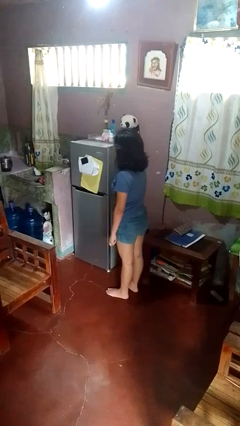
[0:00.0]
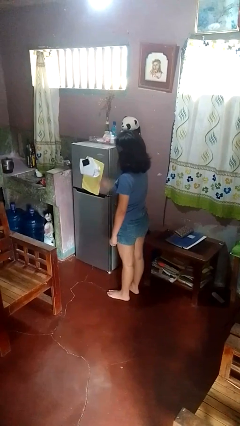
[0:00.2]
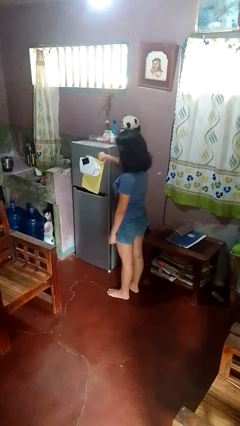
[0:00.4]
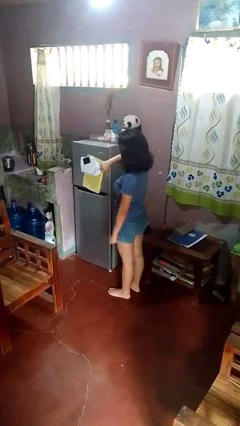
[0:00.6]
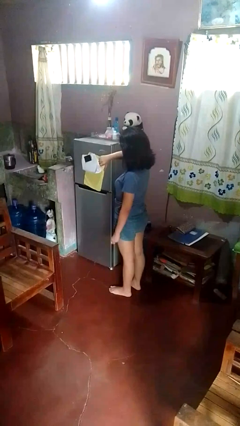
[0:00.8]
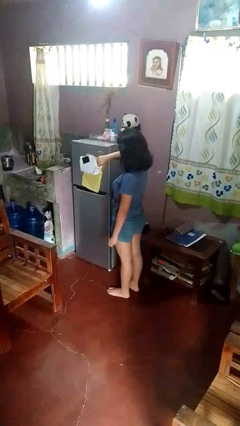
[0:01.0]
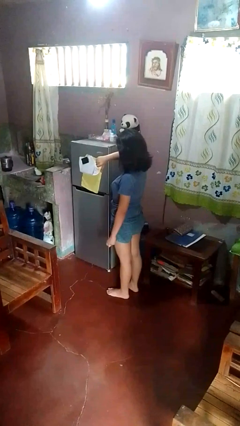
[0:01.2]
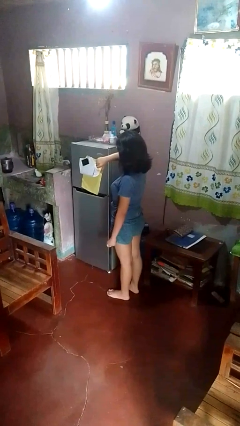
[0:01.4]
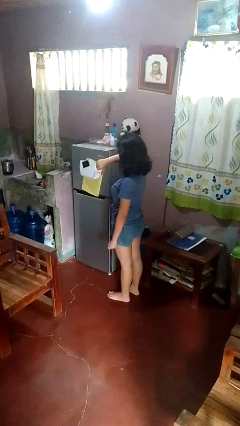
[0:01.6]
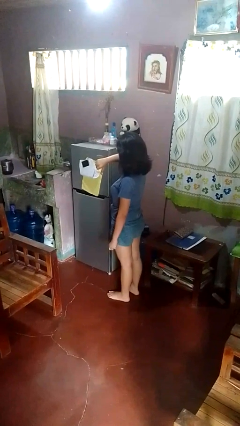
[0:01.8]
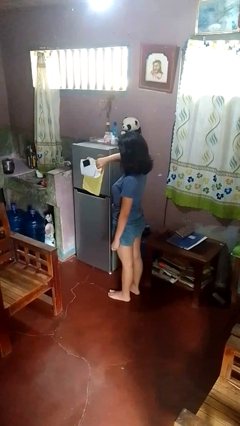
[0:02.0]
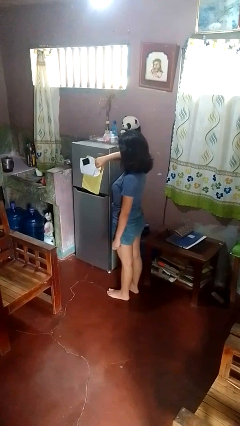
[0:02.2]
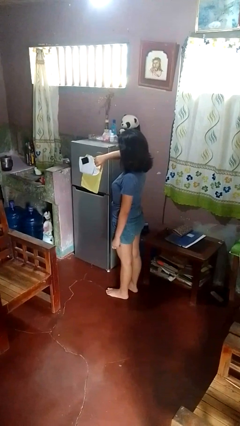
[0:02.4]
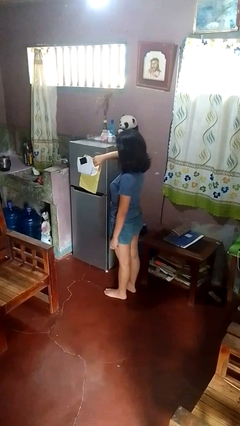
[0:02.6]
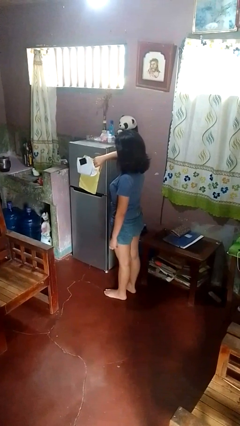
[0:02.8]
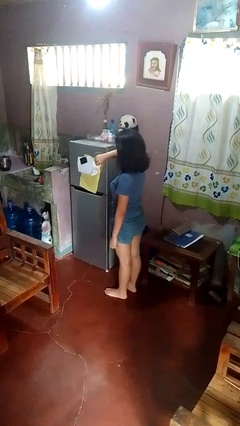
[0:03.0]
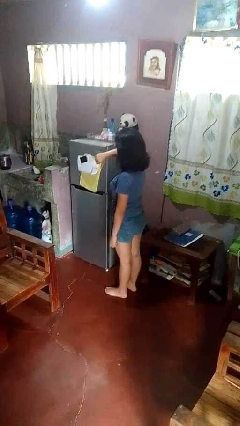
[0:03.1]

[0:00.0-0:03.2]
person gestures thumbs down

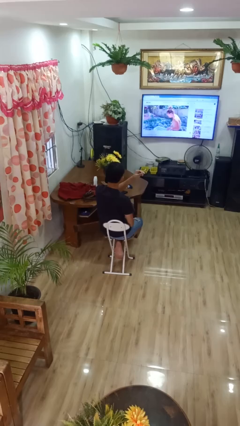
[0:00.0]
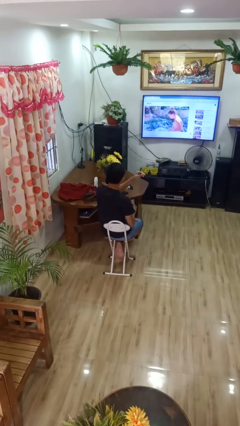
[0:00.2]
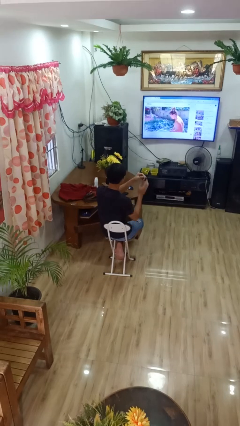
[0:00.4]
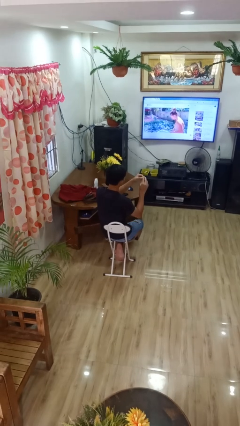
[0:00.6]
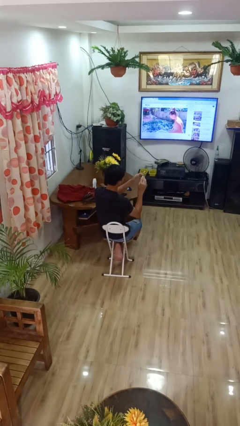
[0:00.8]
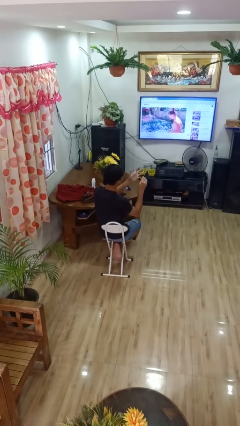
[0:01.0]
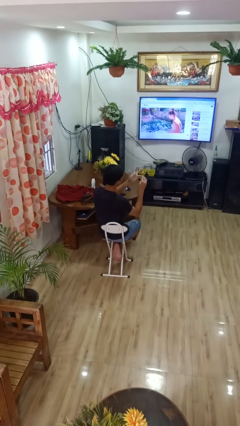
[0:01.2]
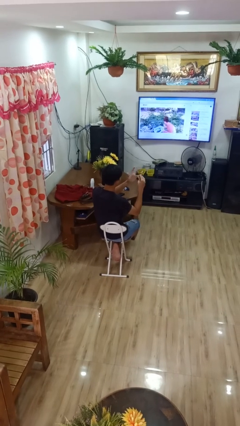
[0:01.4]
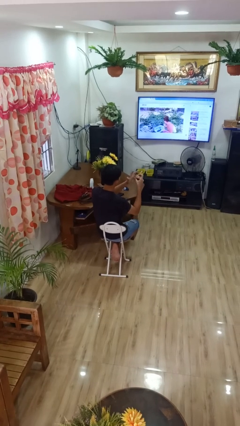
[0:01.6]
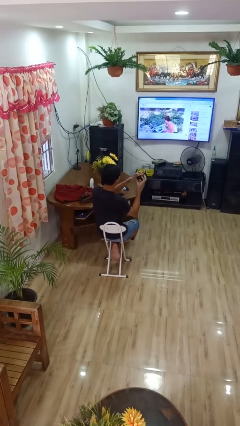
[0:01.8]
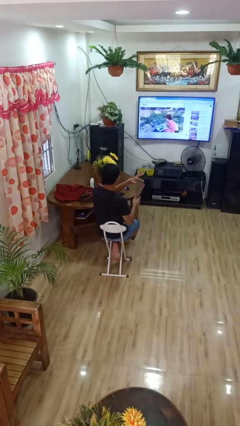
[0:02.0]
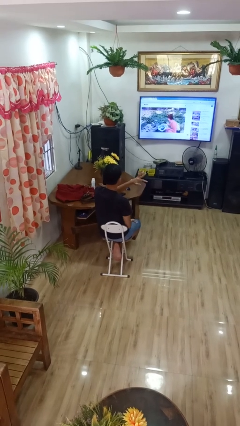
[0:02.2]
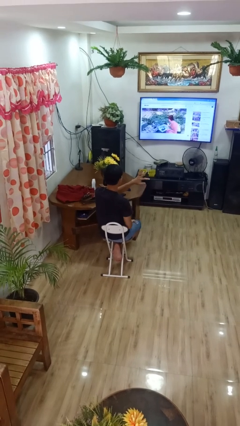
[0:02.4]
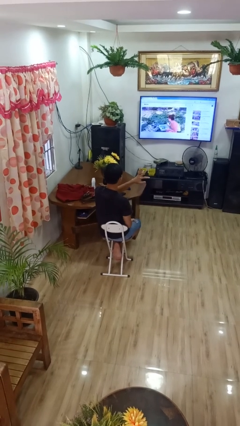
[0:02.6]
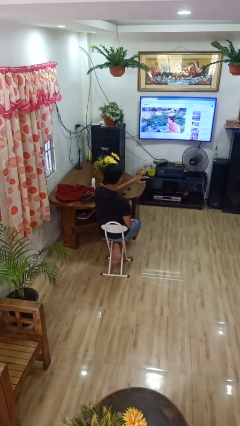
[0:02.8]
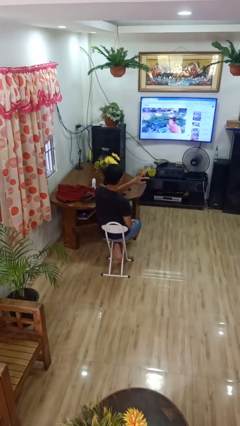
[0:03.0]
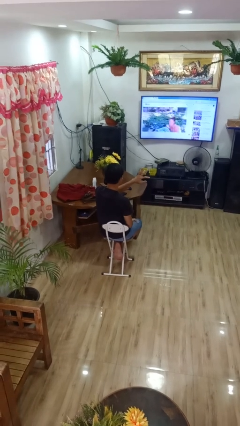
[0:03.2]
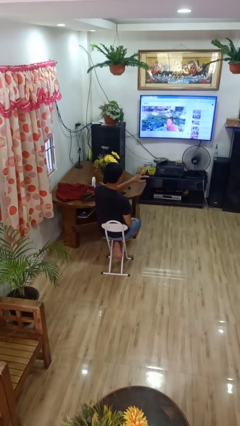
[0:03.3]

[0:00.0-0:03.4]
person puts on ring

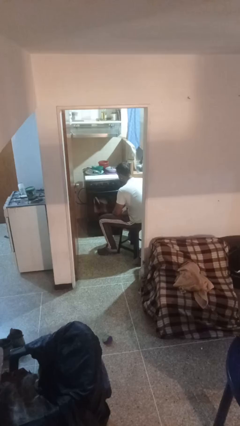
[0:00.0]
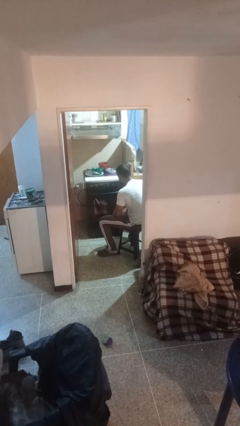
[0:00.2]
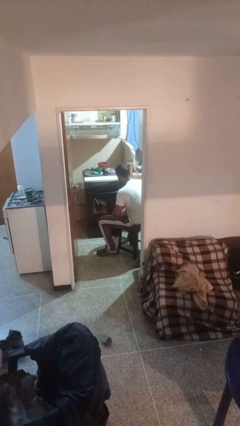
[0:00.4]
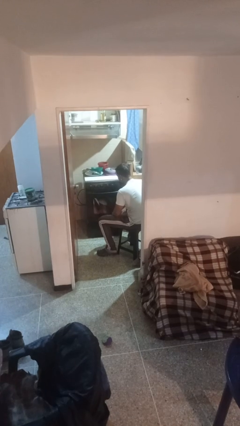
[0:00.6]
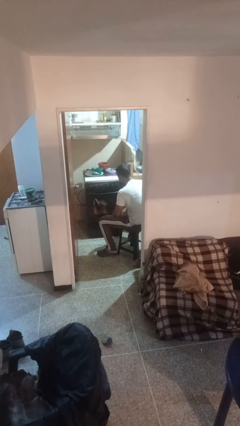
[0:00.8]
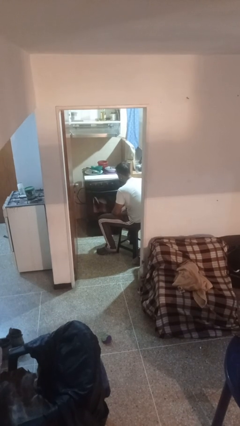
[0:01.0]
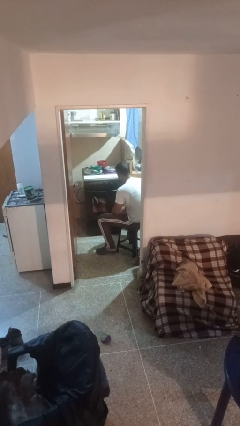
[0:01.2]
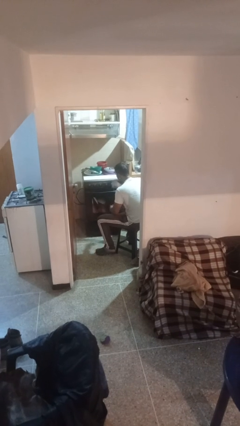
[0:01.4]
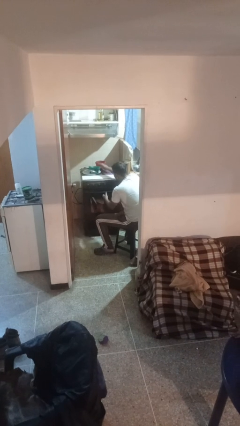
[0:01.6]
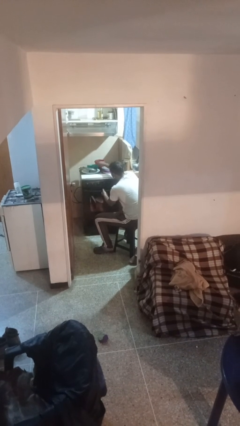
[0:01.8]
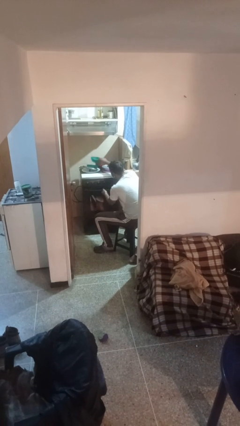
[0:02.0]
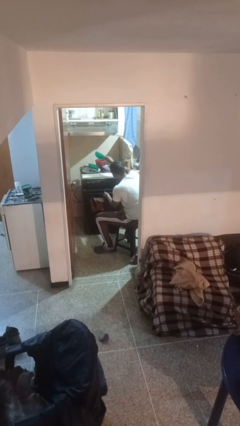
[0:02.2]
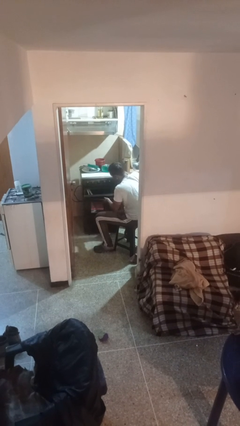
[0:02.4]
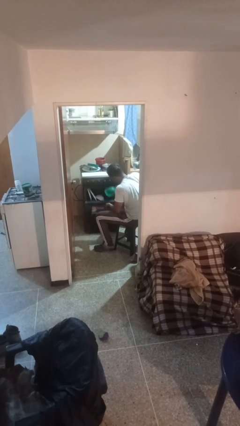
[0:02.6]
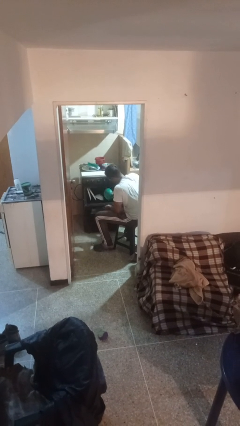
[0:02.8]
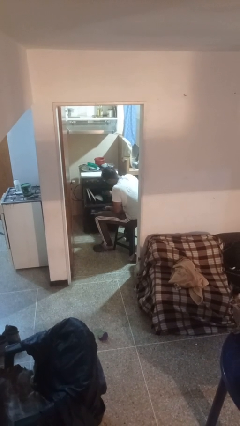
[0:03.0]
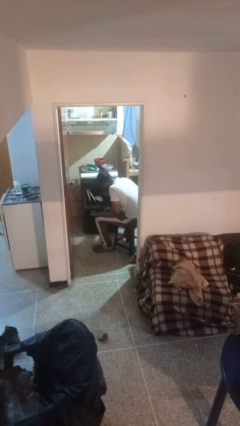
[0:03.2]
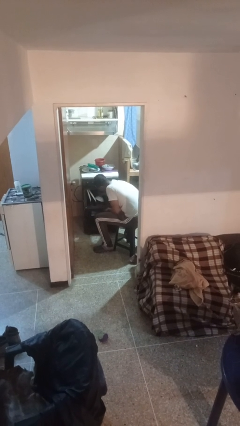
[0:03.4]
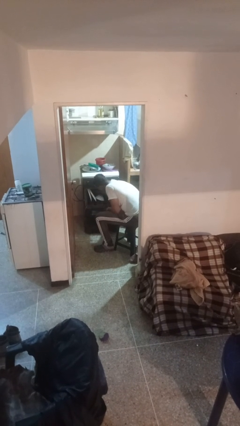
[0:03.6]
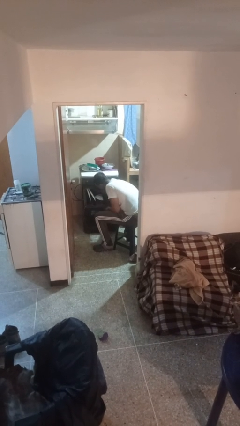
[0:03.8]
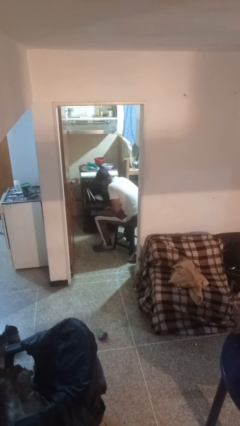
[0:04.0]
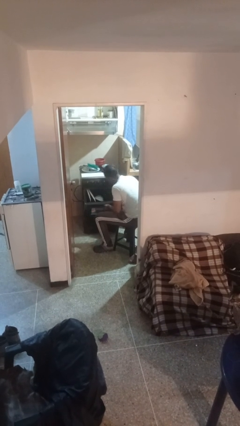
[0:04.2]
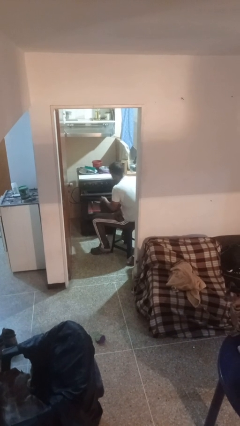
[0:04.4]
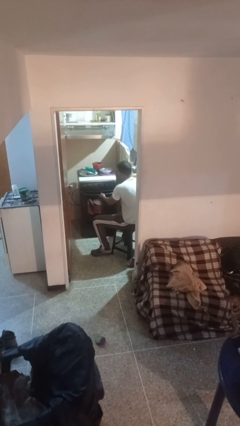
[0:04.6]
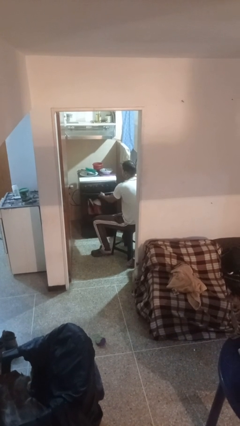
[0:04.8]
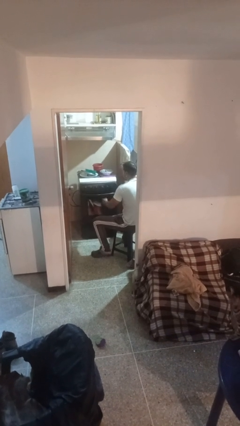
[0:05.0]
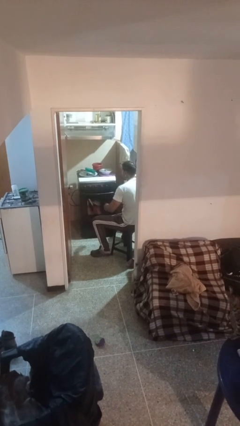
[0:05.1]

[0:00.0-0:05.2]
person loads dishwasher

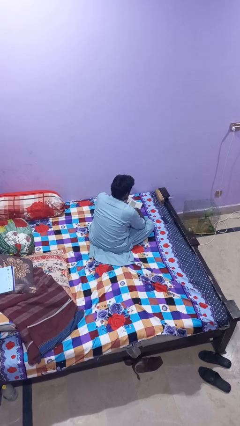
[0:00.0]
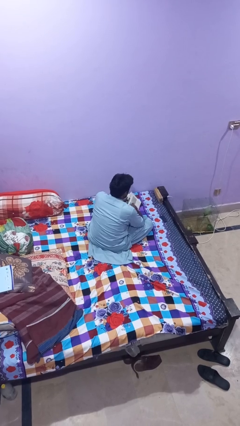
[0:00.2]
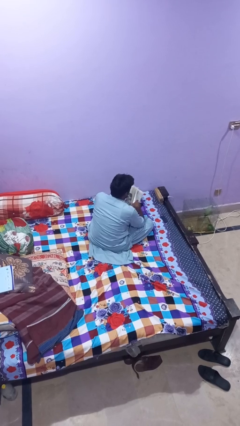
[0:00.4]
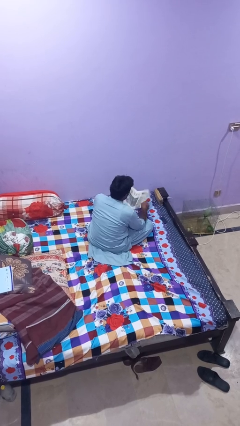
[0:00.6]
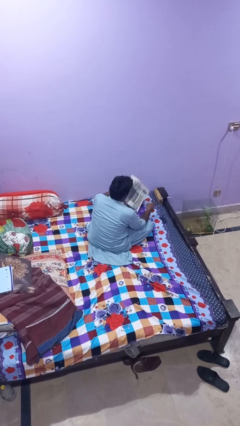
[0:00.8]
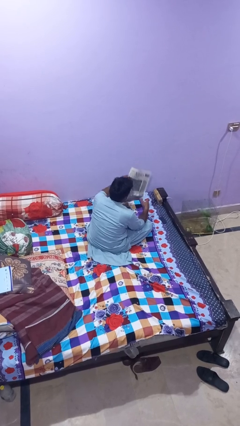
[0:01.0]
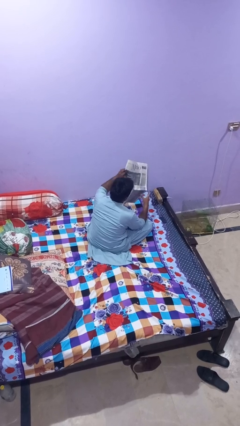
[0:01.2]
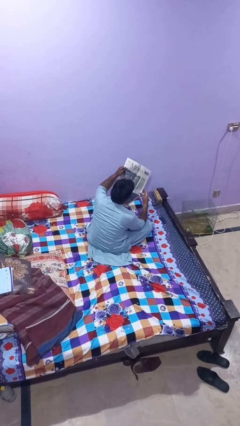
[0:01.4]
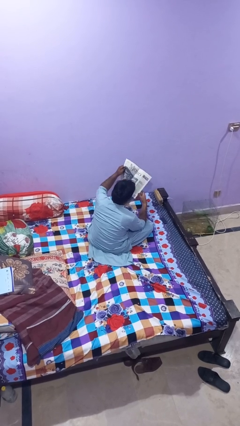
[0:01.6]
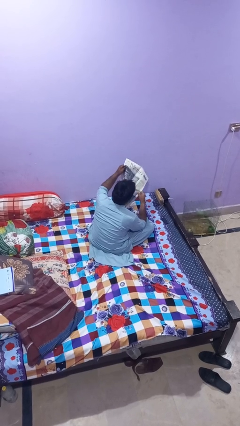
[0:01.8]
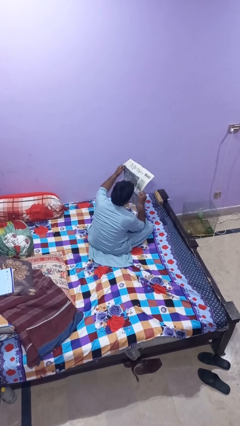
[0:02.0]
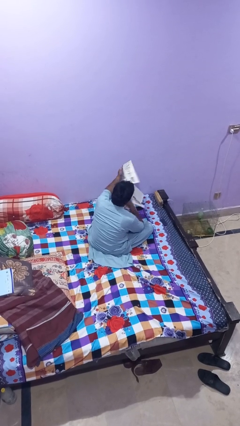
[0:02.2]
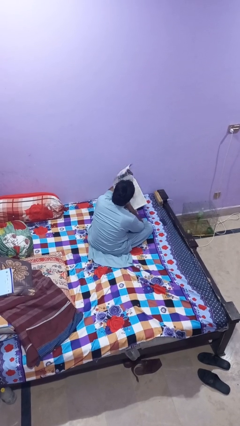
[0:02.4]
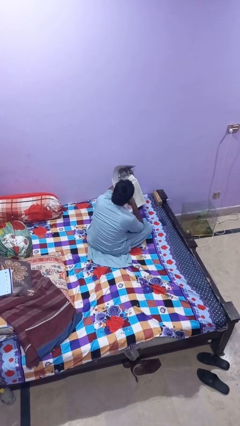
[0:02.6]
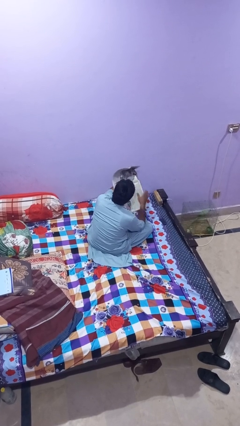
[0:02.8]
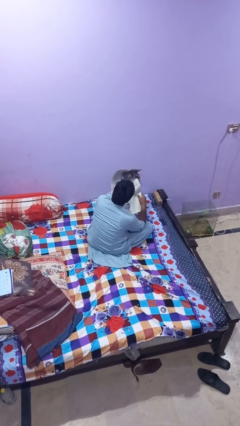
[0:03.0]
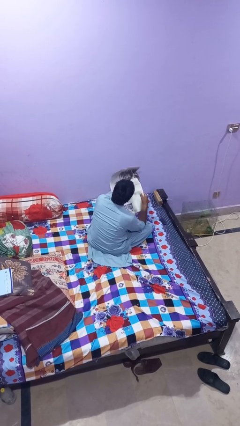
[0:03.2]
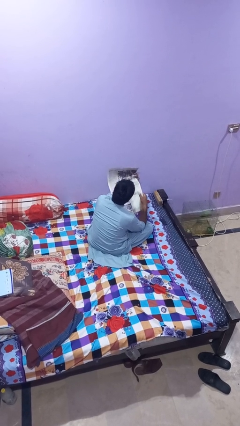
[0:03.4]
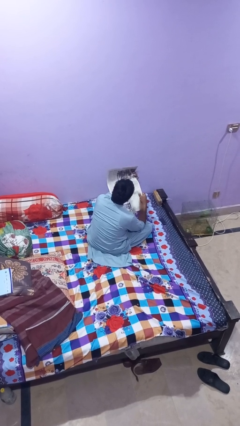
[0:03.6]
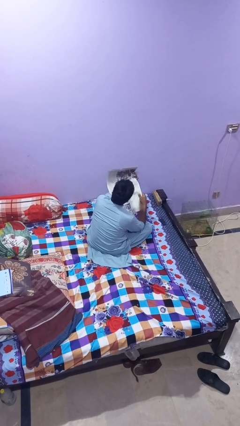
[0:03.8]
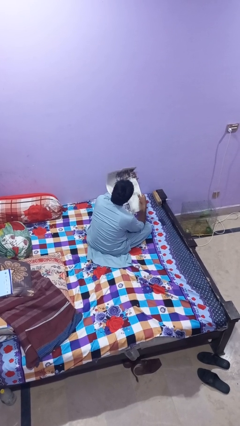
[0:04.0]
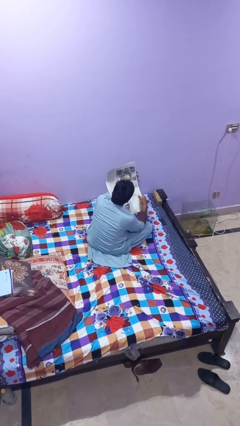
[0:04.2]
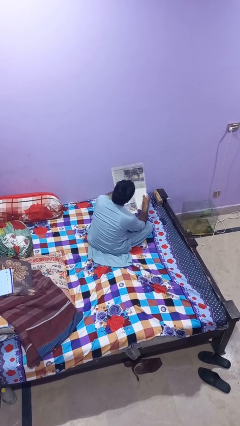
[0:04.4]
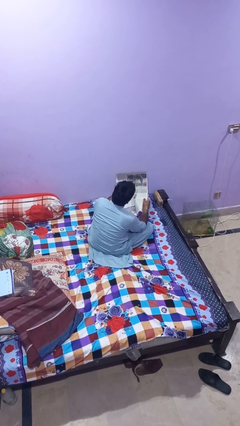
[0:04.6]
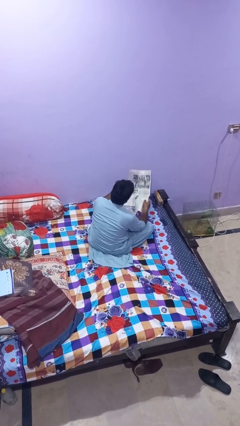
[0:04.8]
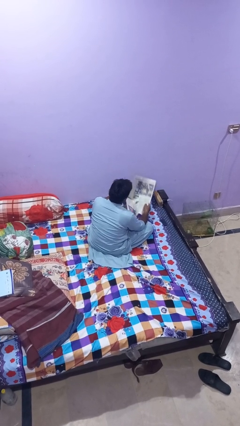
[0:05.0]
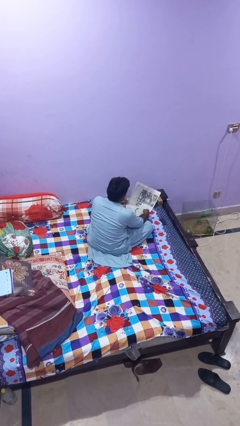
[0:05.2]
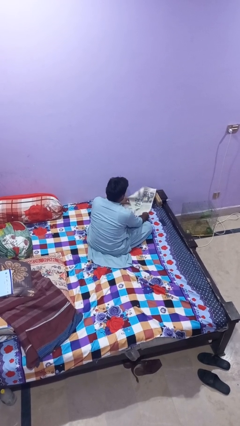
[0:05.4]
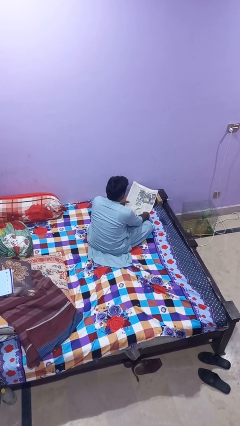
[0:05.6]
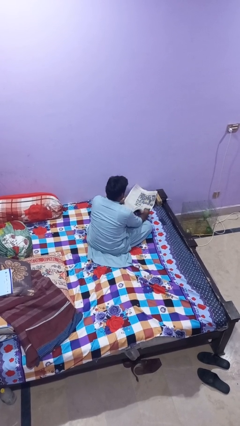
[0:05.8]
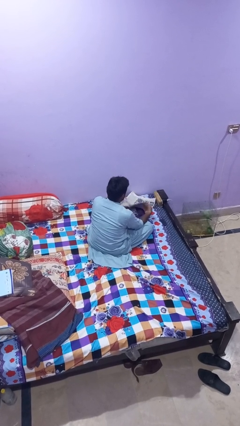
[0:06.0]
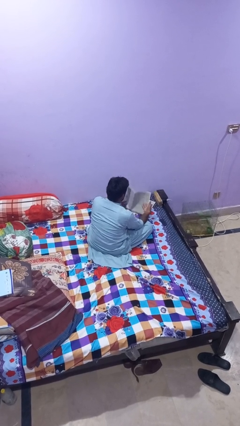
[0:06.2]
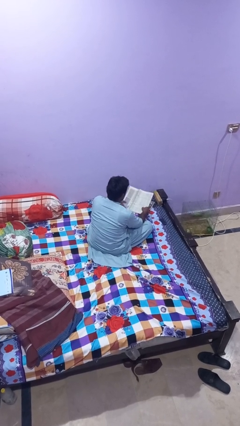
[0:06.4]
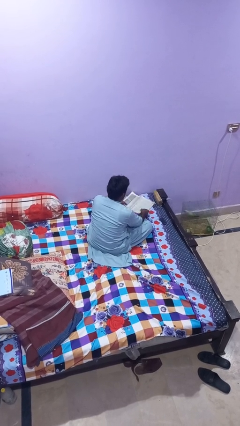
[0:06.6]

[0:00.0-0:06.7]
person reads newspaper
